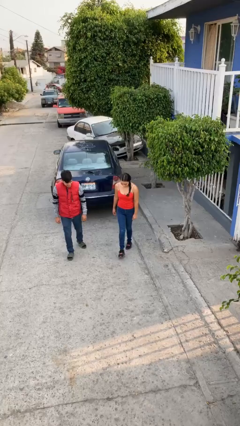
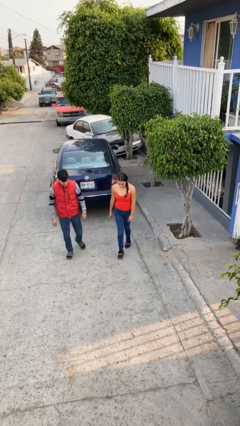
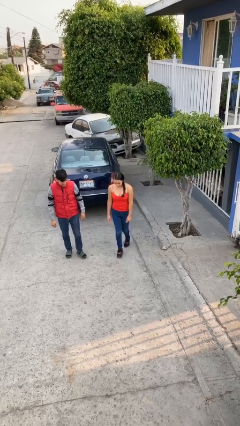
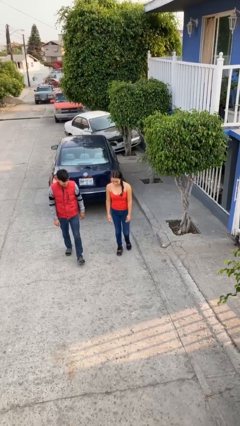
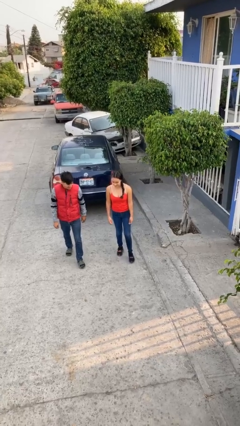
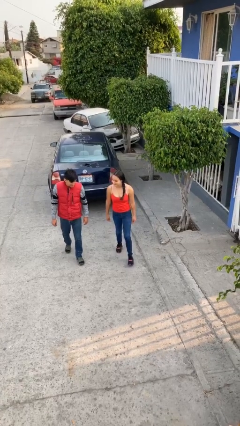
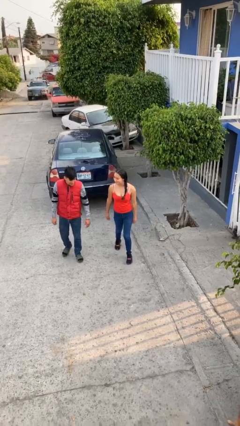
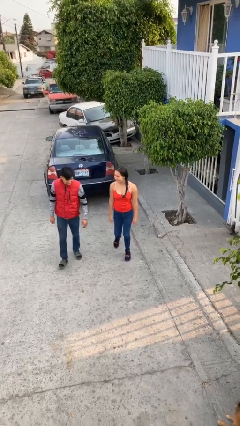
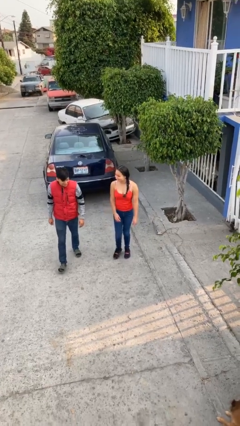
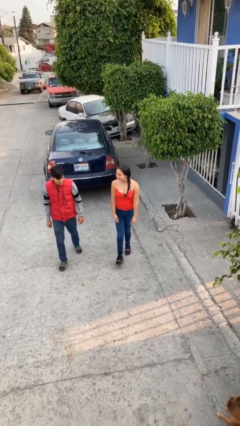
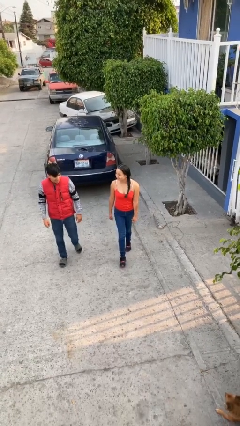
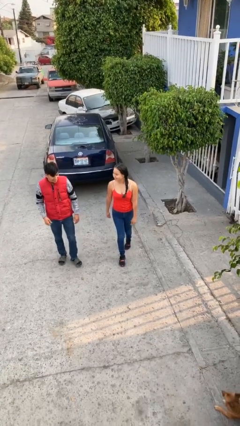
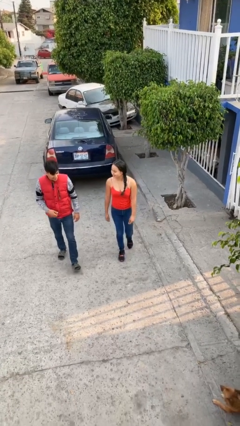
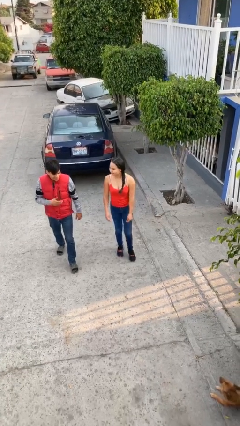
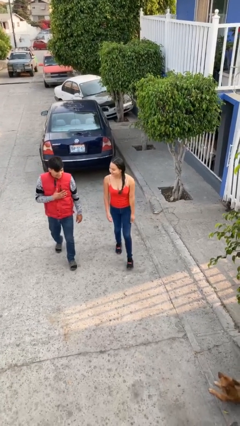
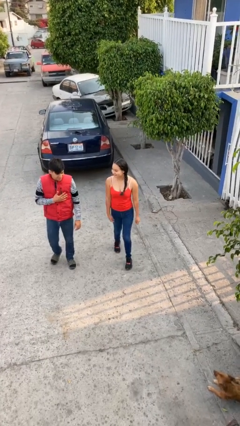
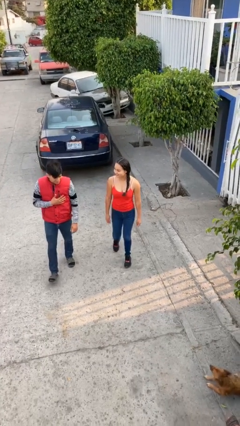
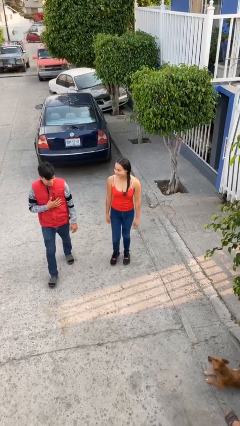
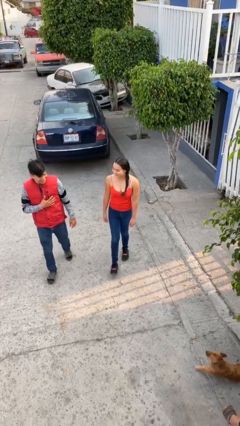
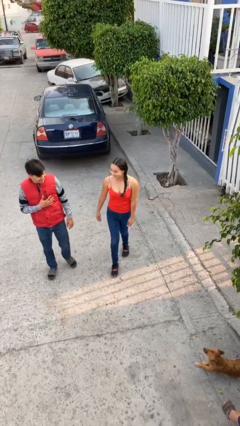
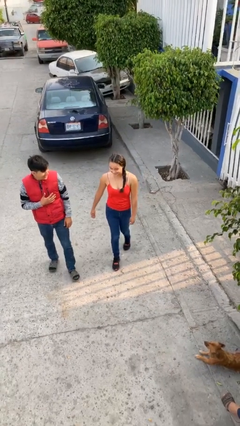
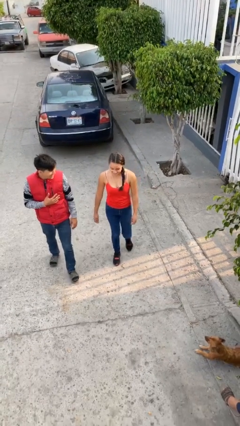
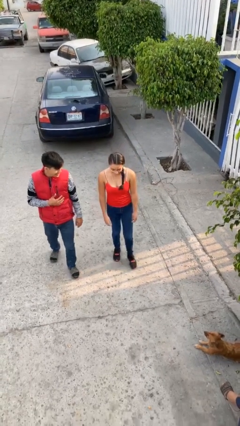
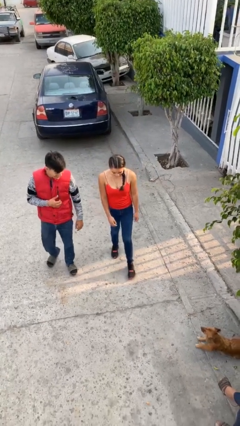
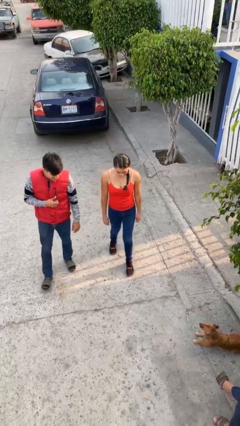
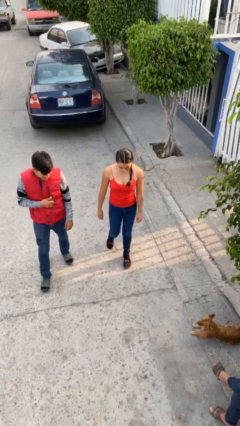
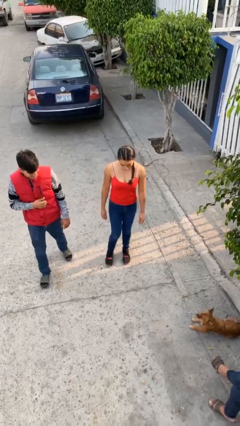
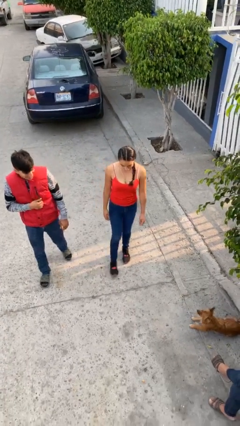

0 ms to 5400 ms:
person talks to person

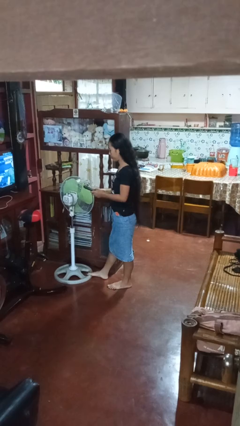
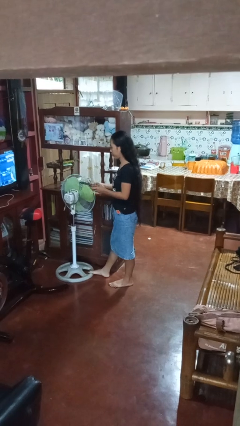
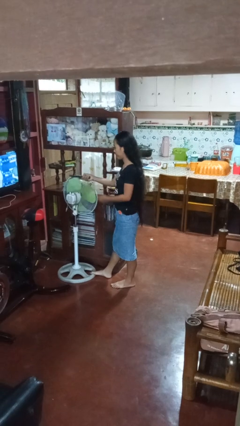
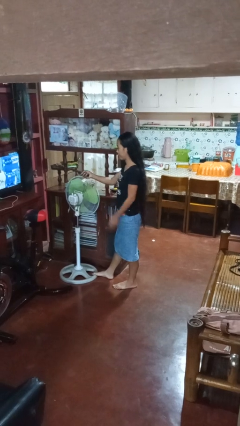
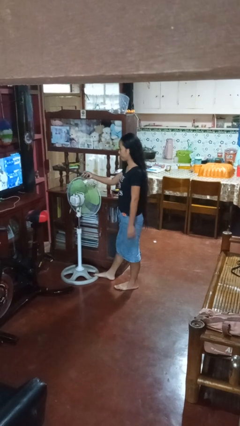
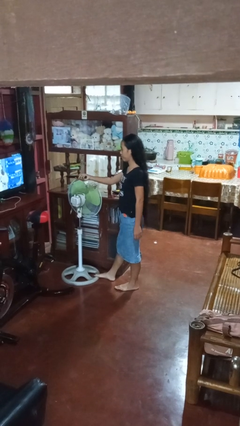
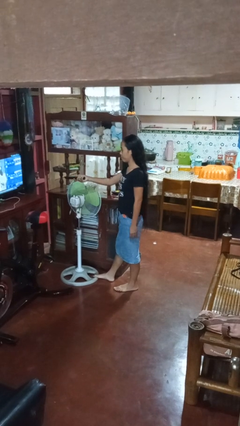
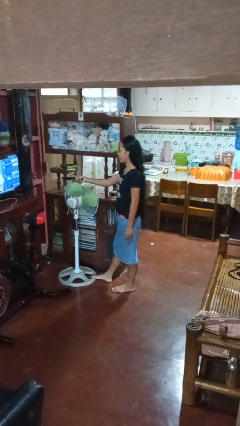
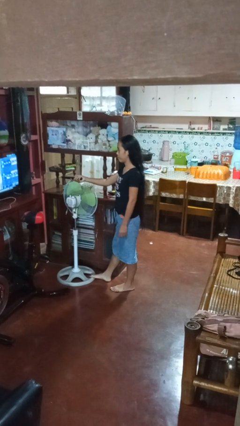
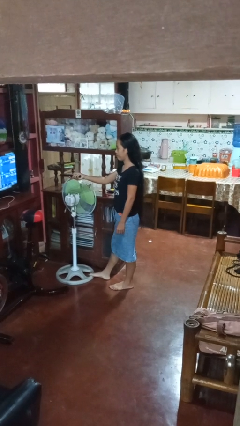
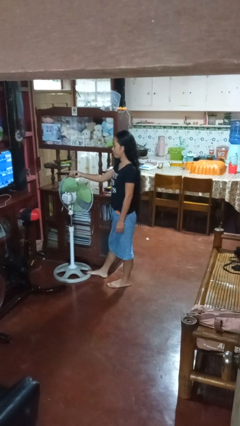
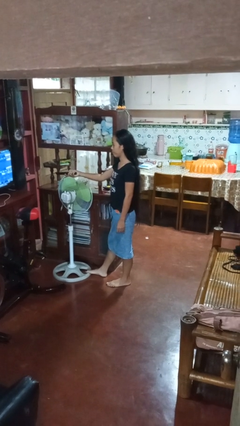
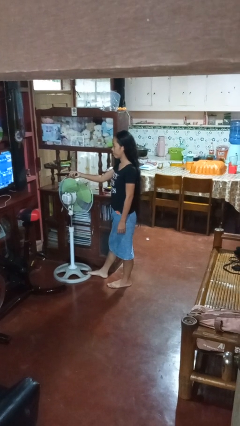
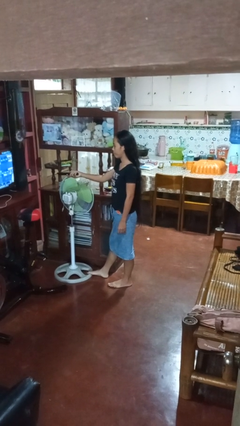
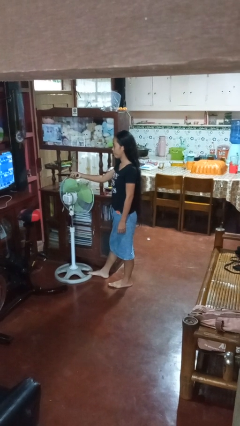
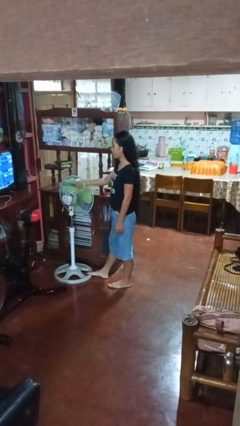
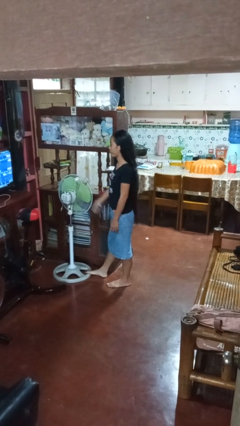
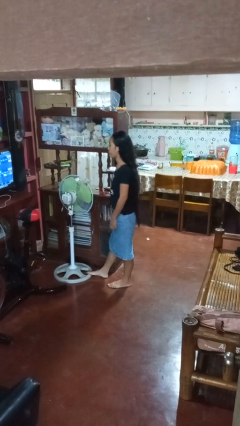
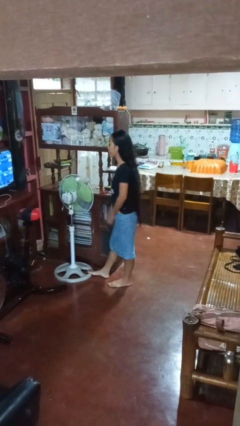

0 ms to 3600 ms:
person uses television remote

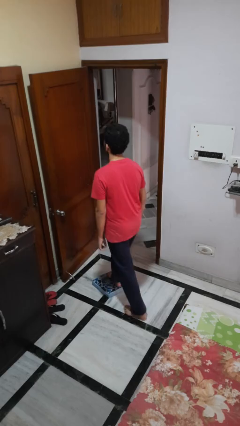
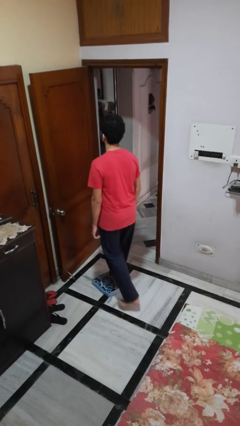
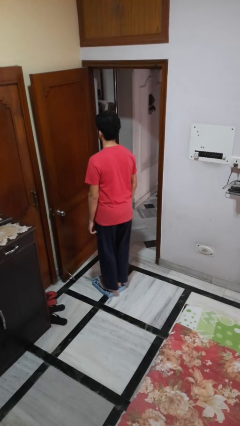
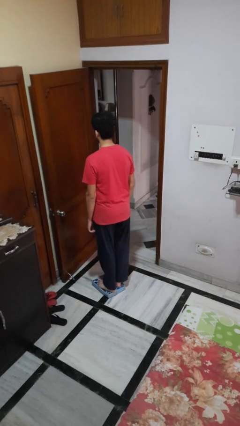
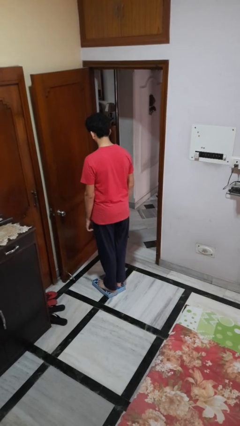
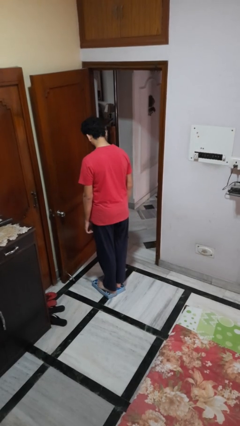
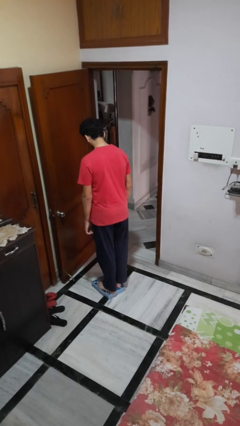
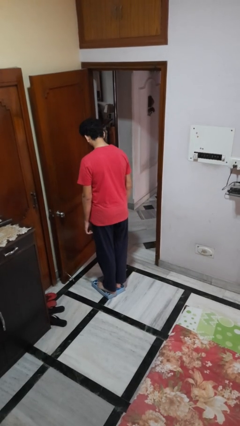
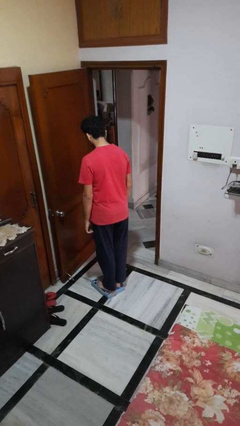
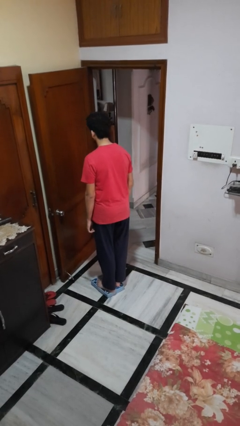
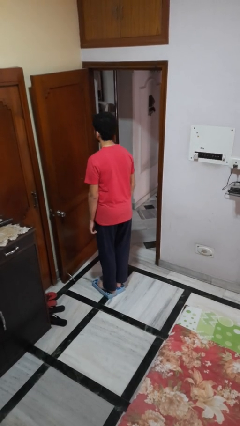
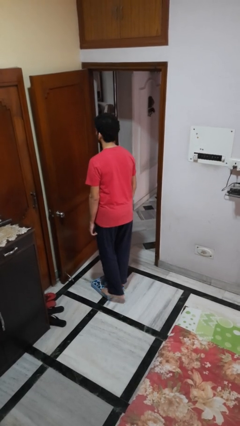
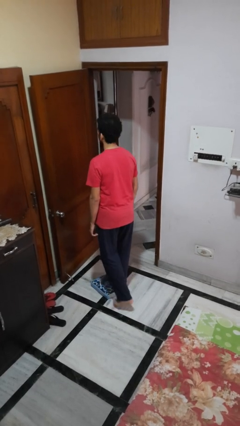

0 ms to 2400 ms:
person uses bodyweight scale

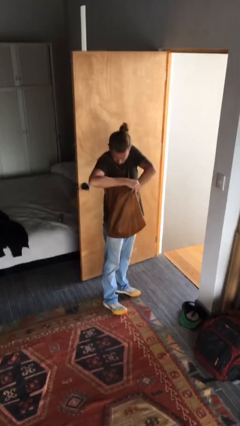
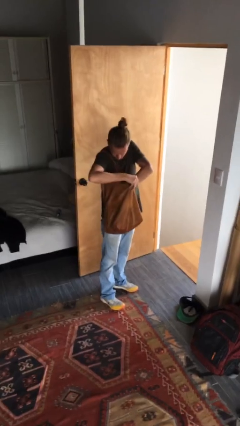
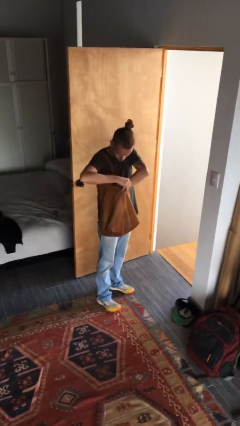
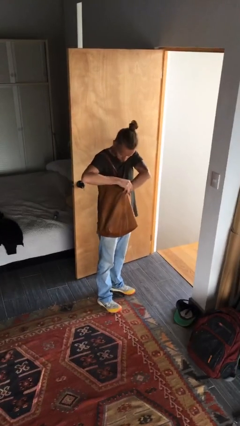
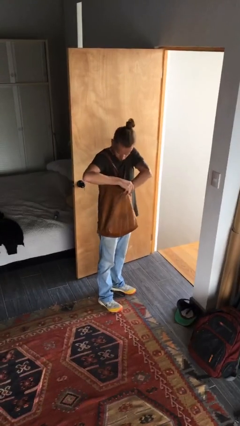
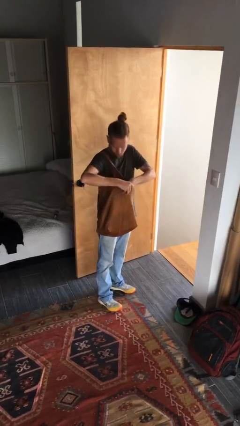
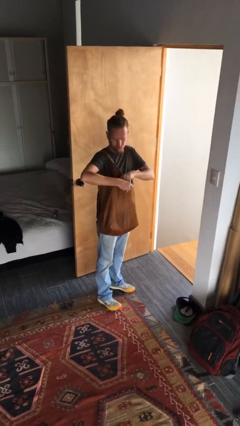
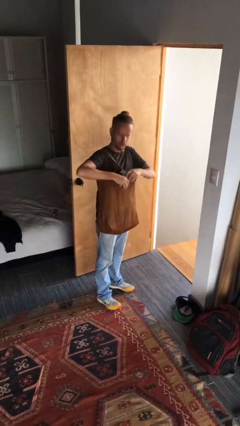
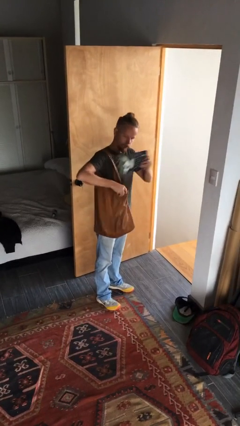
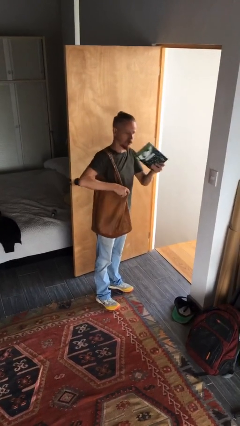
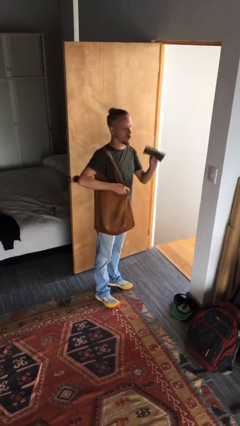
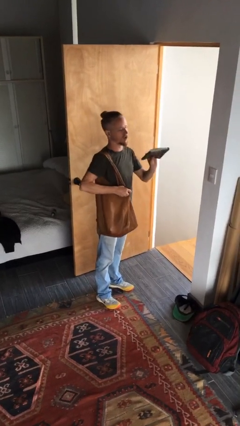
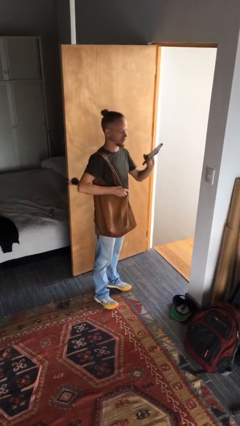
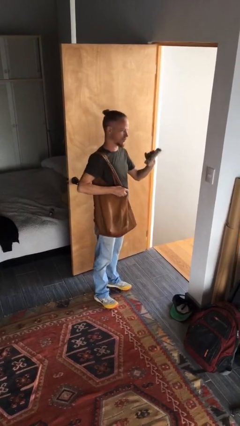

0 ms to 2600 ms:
person takes object from purse

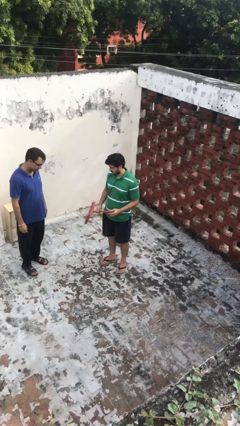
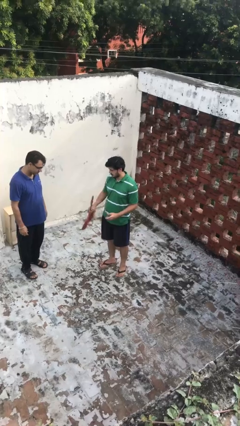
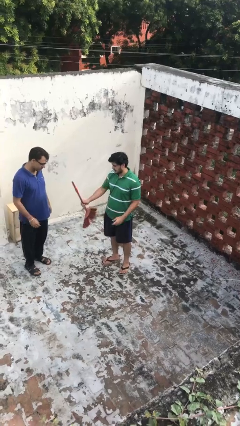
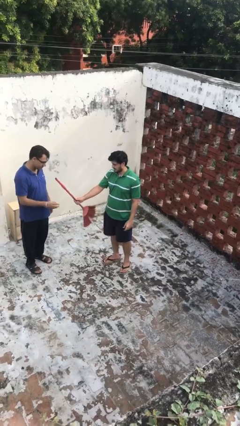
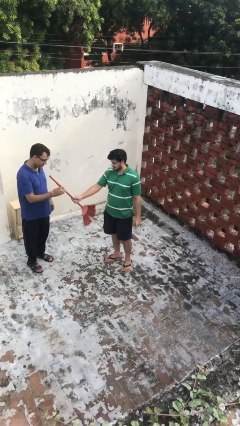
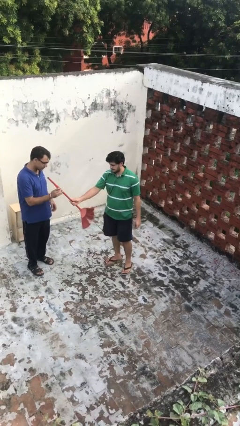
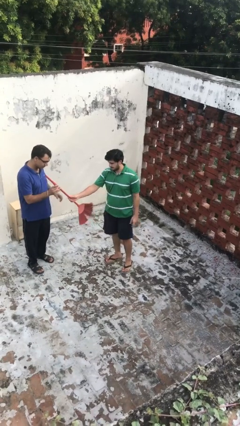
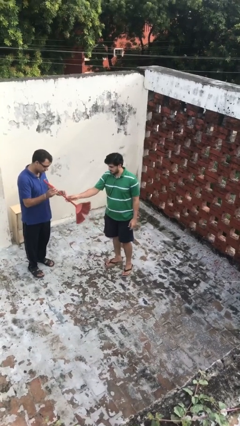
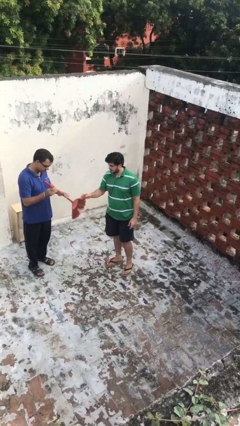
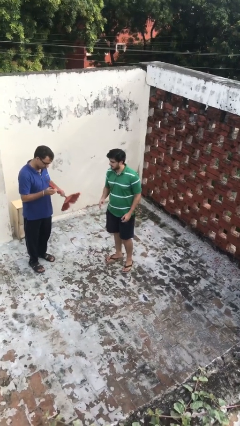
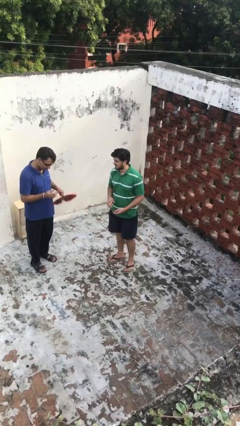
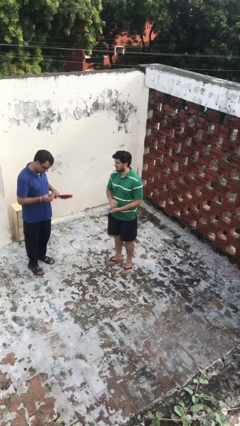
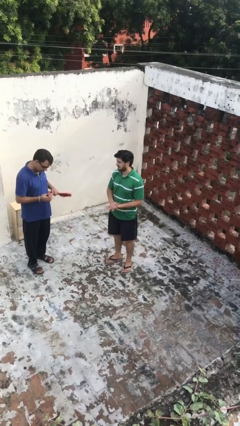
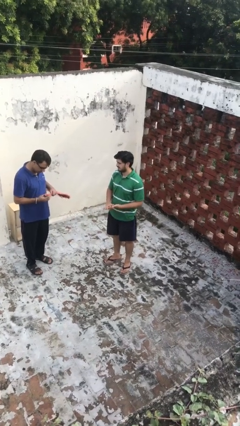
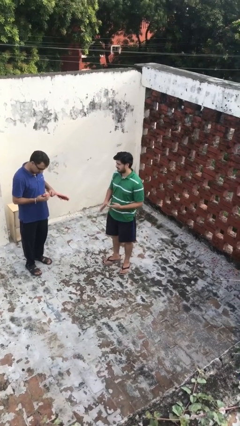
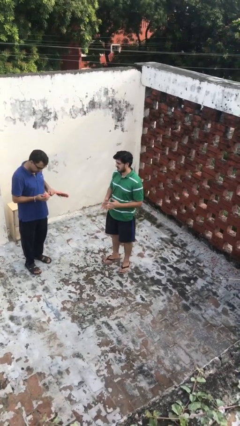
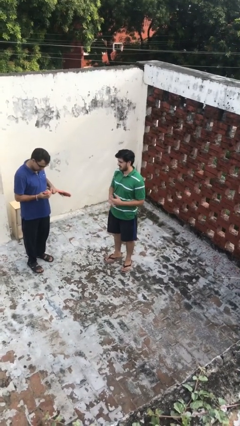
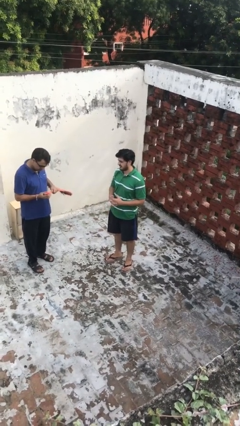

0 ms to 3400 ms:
person transfers object to person

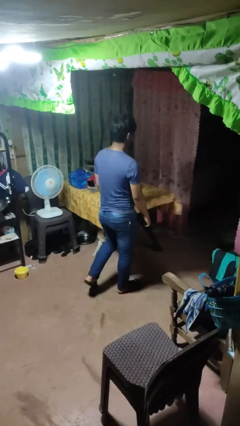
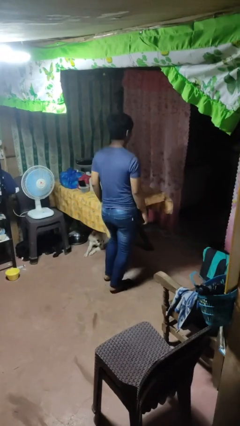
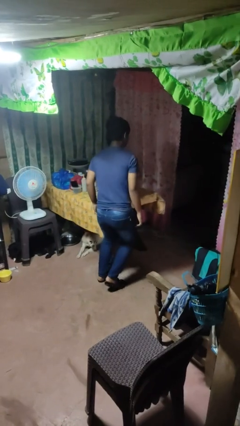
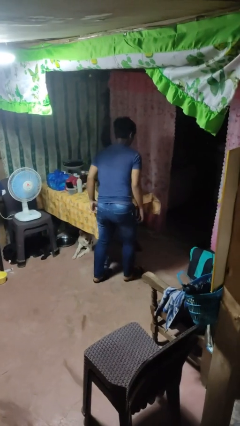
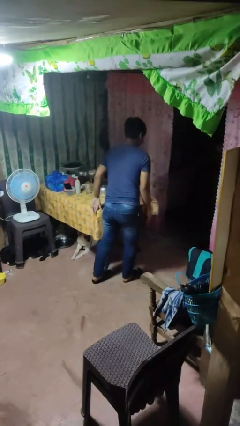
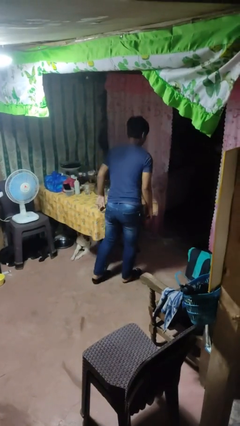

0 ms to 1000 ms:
person bumps into table
